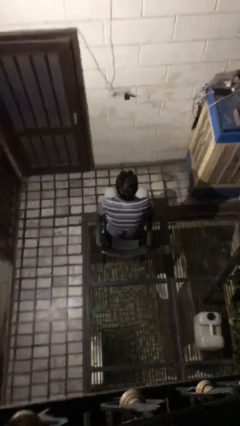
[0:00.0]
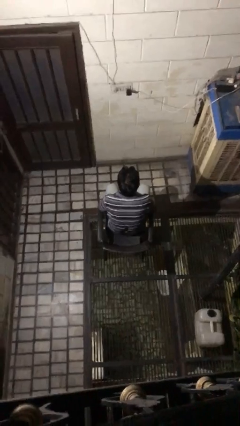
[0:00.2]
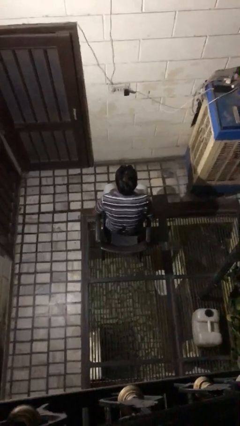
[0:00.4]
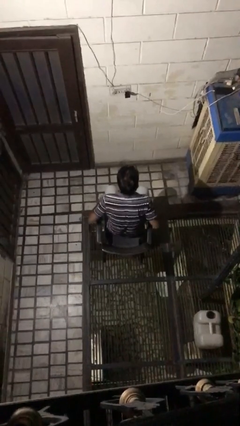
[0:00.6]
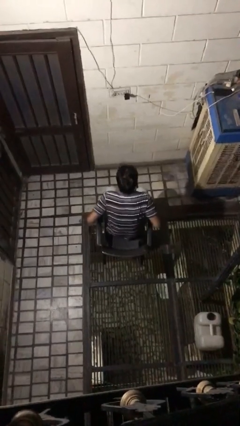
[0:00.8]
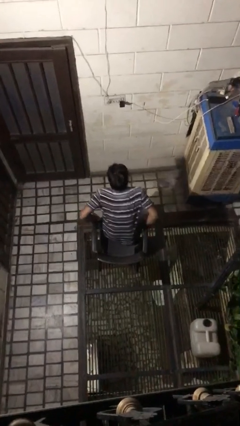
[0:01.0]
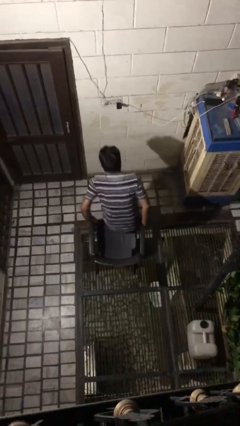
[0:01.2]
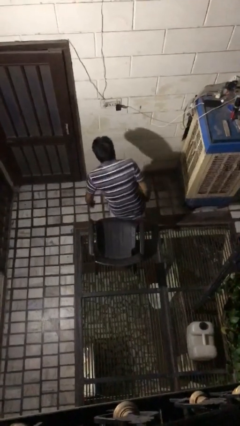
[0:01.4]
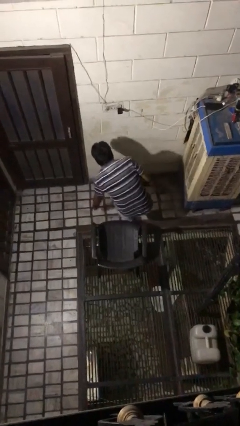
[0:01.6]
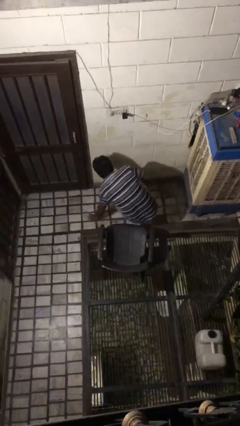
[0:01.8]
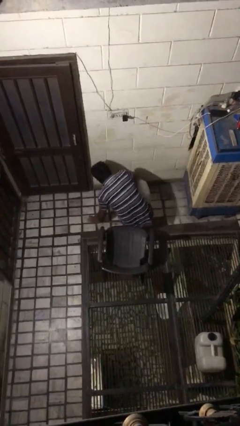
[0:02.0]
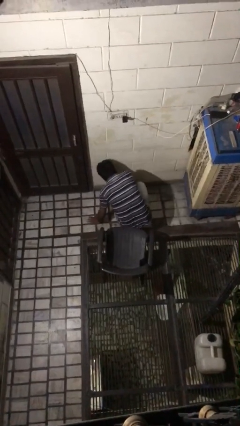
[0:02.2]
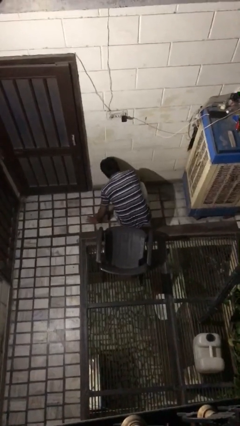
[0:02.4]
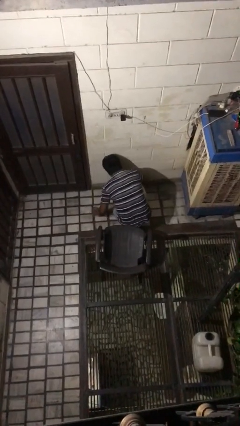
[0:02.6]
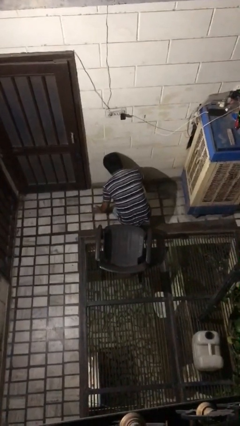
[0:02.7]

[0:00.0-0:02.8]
person falls from chair

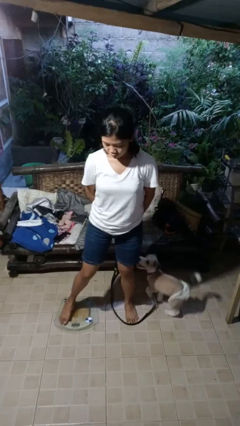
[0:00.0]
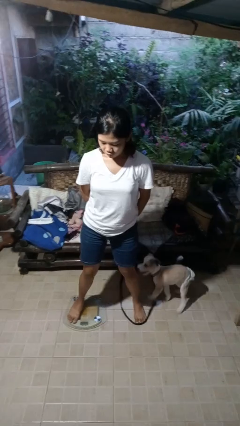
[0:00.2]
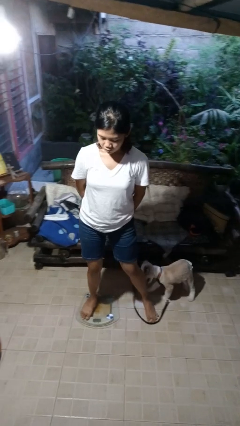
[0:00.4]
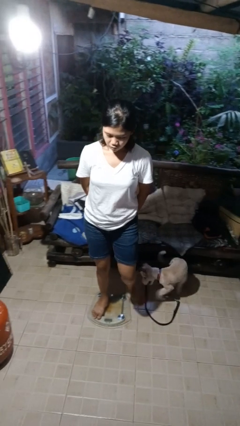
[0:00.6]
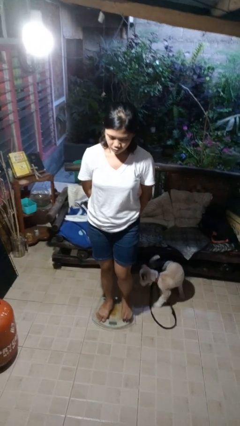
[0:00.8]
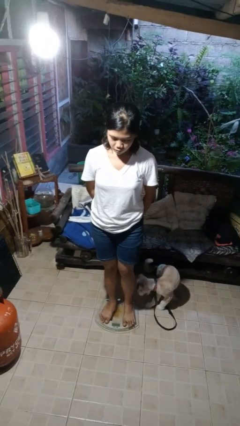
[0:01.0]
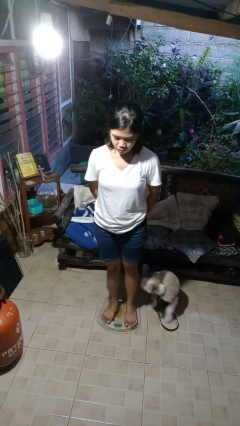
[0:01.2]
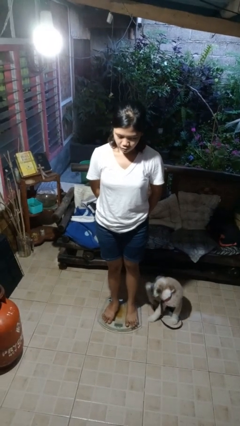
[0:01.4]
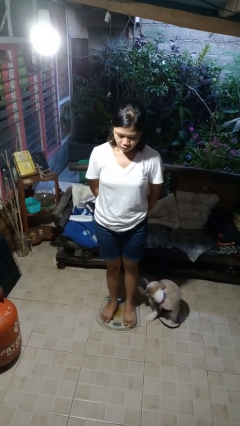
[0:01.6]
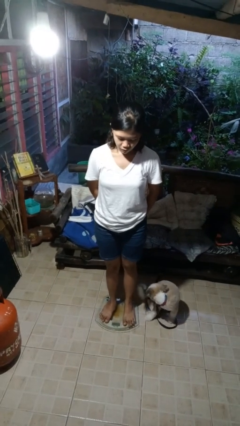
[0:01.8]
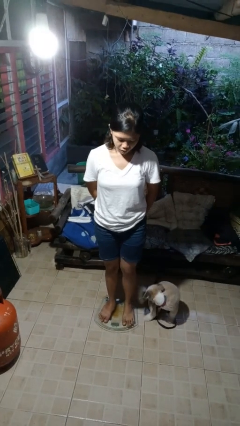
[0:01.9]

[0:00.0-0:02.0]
person uses bodyweight scale

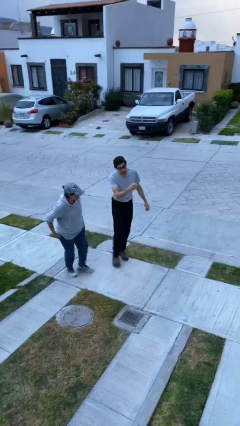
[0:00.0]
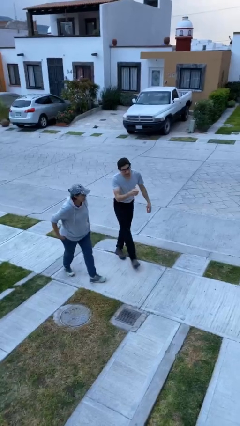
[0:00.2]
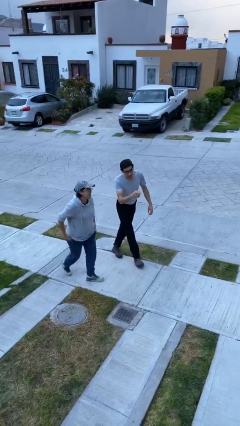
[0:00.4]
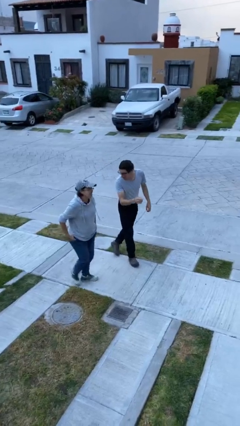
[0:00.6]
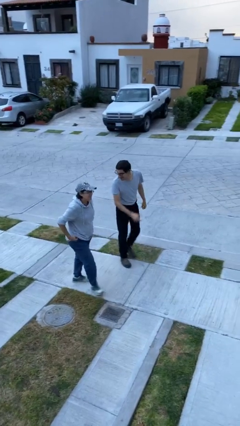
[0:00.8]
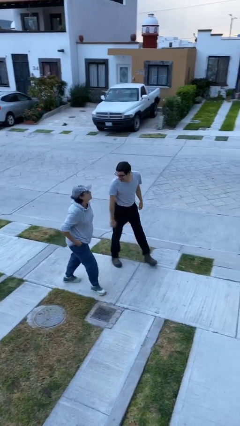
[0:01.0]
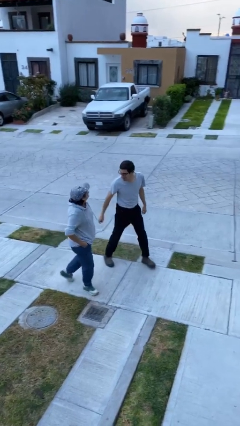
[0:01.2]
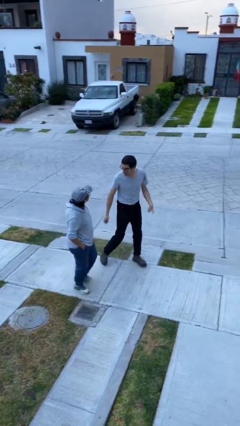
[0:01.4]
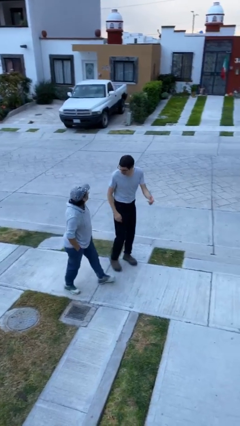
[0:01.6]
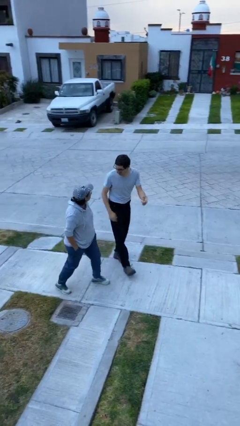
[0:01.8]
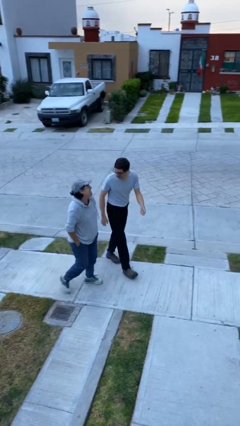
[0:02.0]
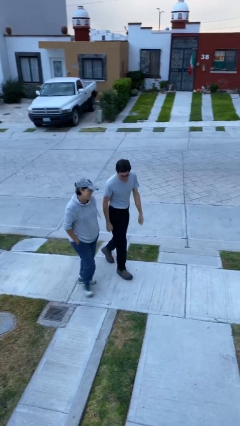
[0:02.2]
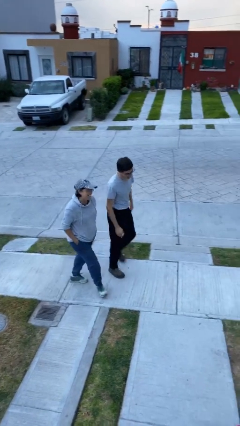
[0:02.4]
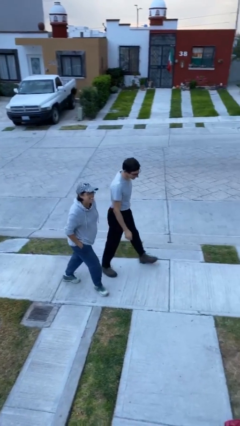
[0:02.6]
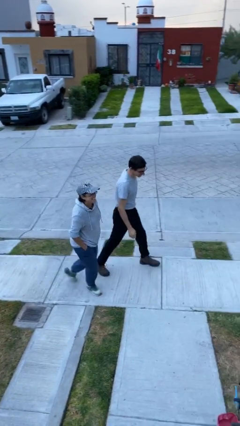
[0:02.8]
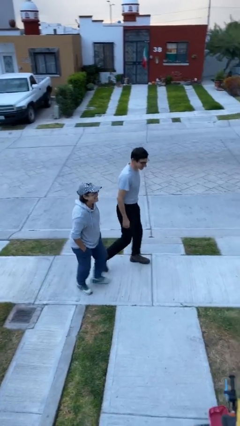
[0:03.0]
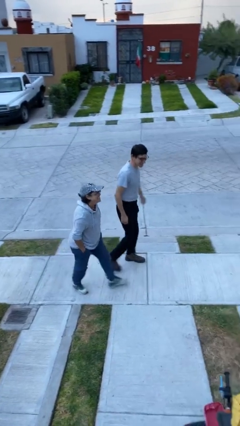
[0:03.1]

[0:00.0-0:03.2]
person talks to person

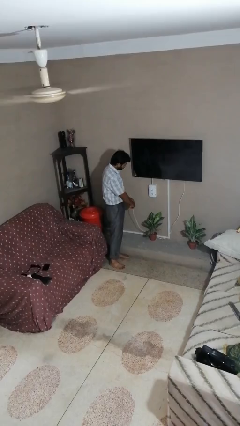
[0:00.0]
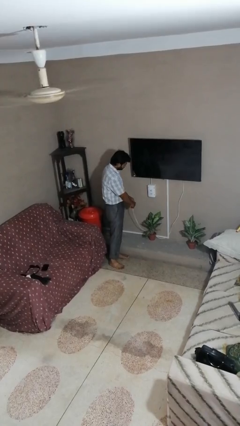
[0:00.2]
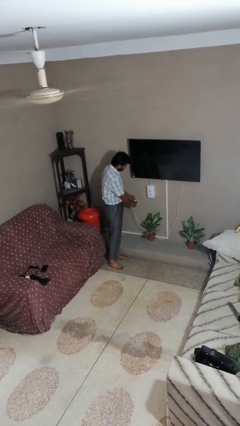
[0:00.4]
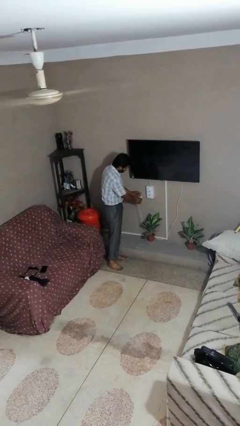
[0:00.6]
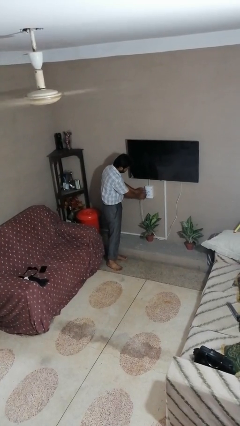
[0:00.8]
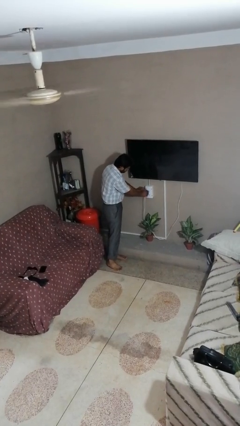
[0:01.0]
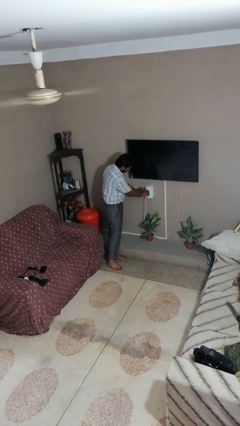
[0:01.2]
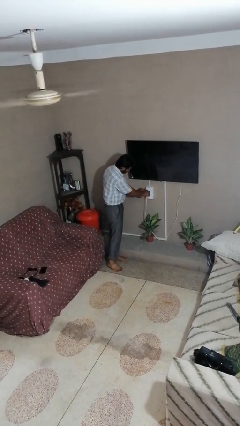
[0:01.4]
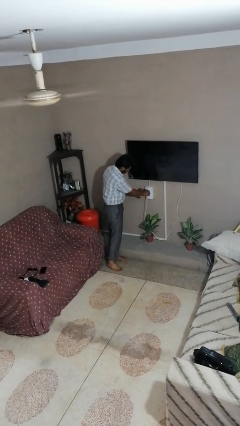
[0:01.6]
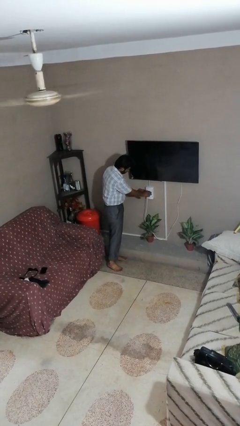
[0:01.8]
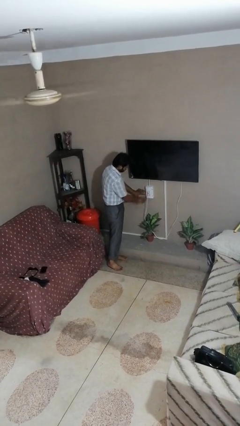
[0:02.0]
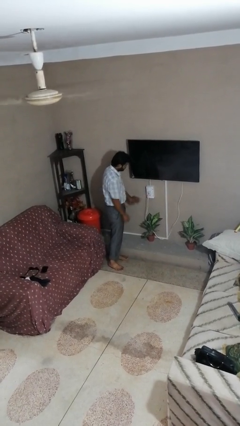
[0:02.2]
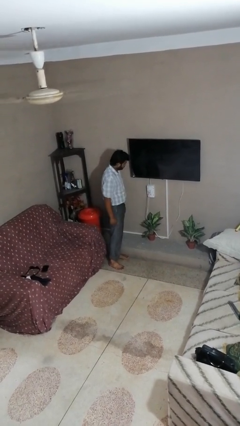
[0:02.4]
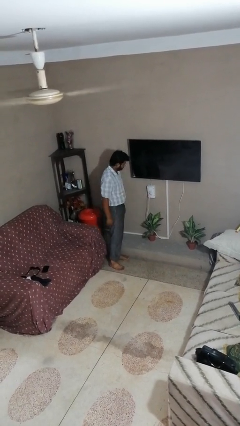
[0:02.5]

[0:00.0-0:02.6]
person plugs into electrical socket

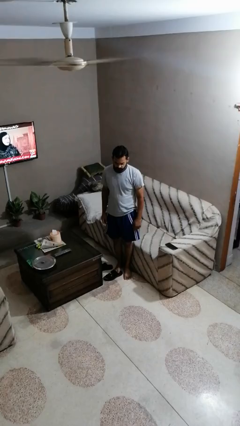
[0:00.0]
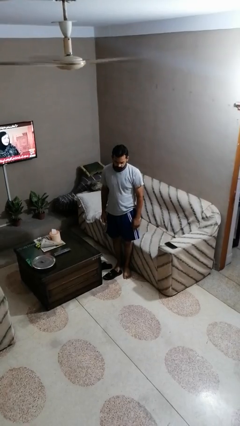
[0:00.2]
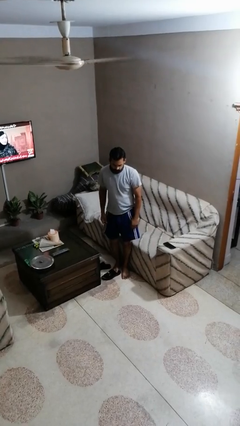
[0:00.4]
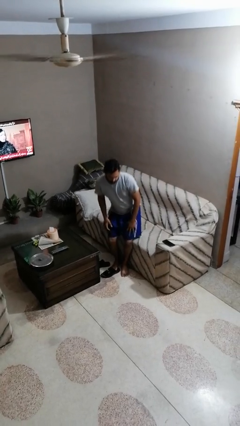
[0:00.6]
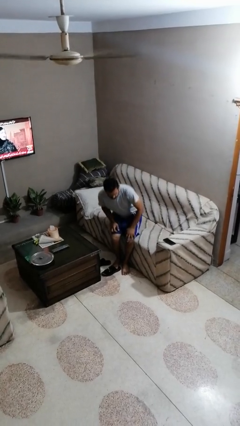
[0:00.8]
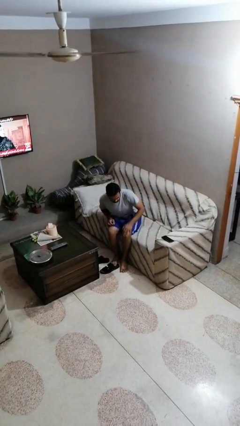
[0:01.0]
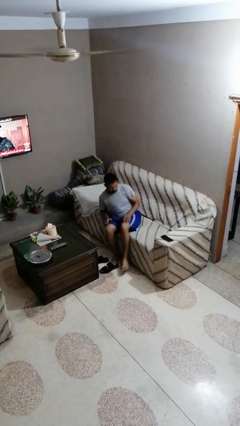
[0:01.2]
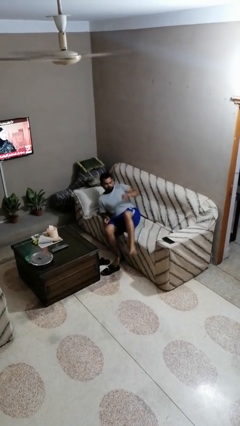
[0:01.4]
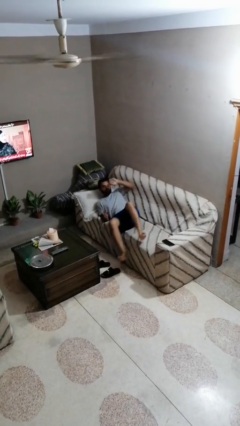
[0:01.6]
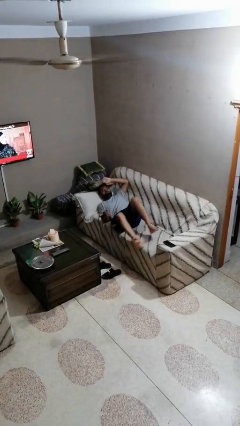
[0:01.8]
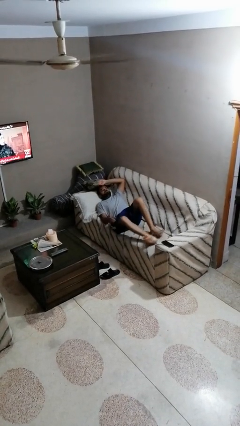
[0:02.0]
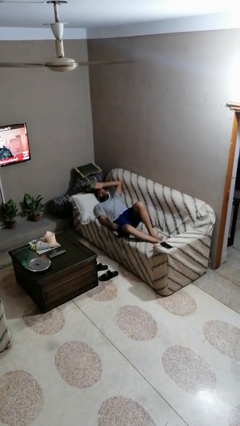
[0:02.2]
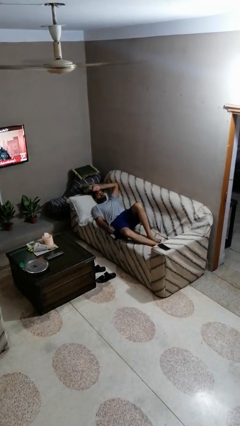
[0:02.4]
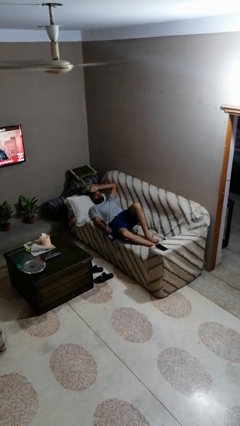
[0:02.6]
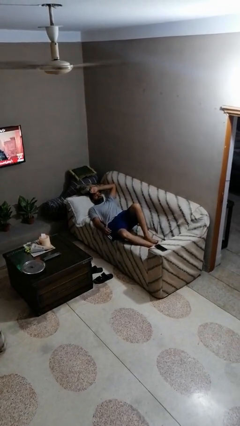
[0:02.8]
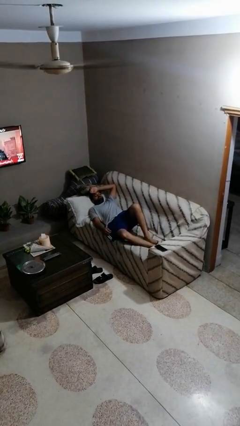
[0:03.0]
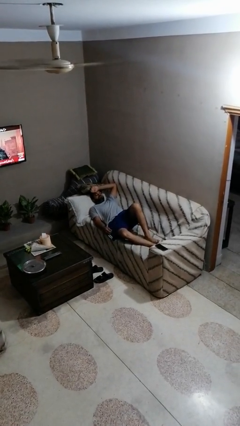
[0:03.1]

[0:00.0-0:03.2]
person lies down on couch

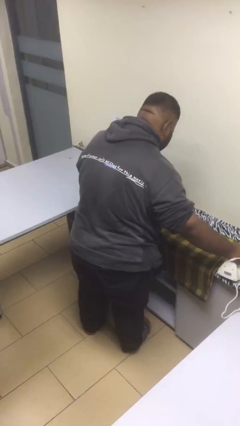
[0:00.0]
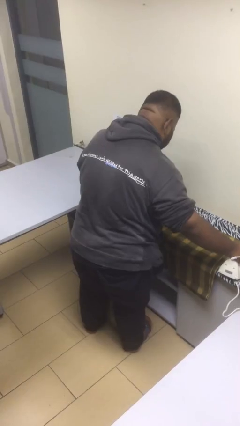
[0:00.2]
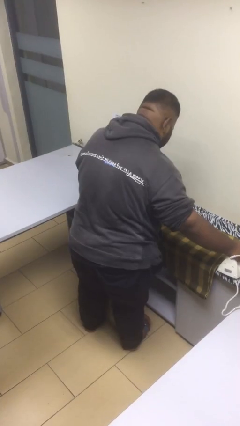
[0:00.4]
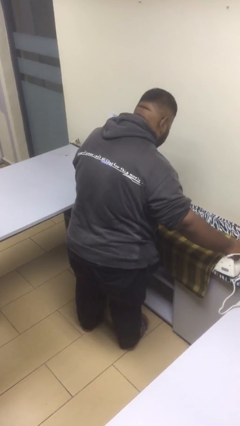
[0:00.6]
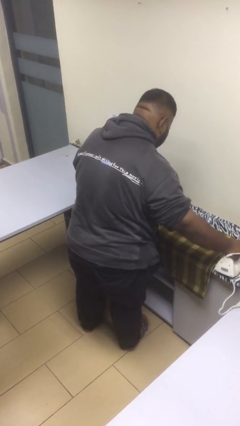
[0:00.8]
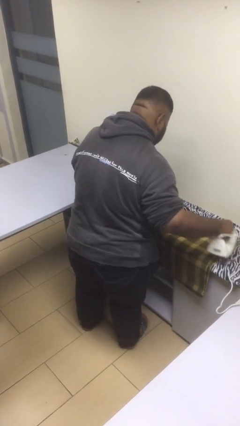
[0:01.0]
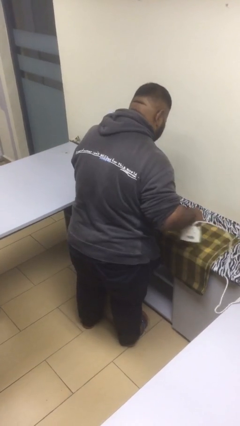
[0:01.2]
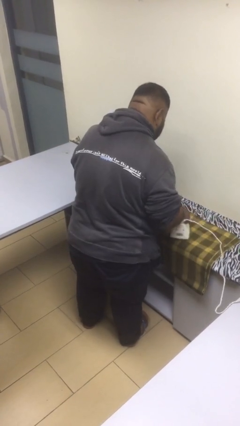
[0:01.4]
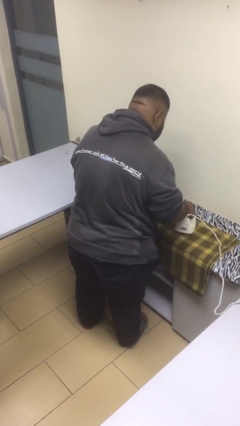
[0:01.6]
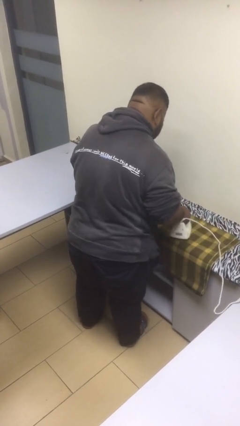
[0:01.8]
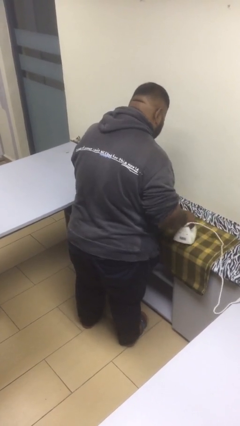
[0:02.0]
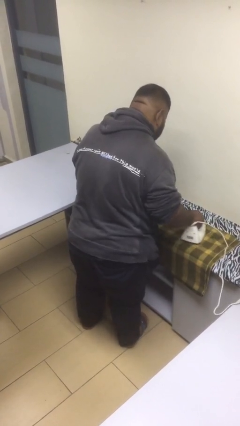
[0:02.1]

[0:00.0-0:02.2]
person irons clothes

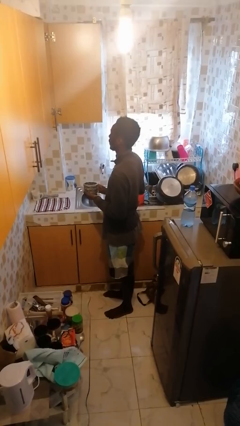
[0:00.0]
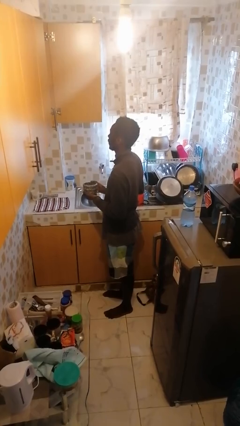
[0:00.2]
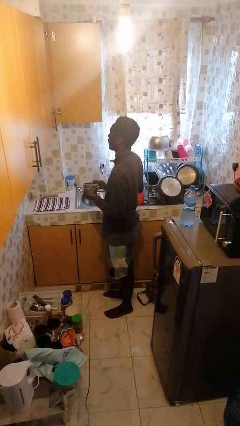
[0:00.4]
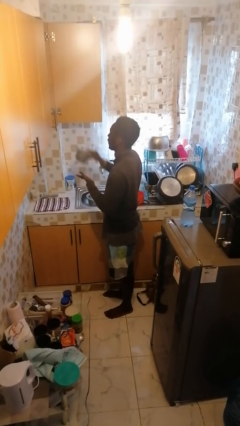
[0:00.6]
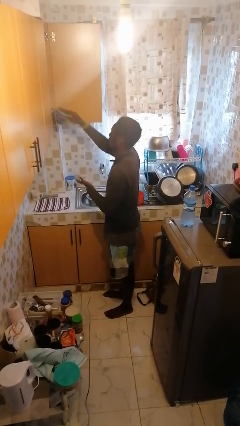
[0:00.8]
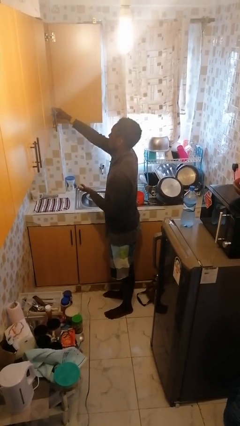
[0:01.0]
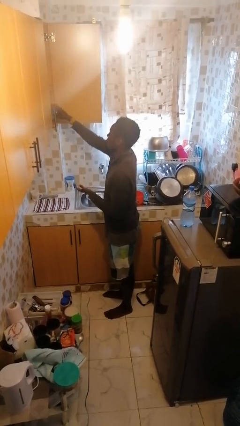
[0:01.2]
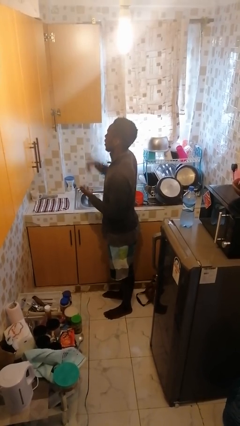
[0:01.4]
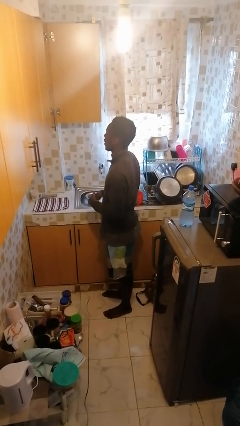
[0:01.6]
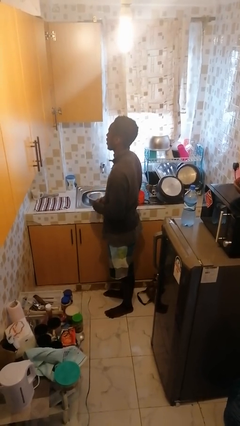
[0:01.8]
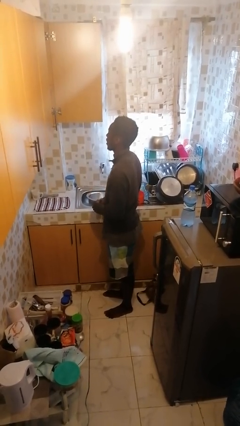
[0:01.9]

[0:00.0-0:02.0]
person puts down object into cabinet
